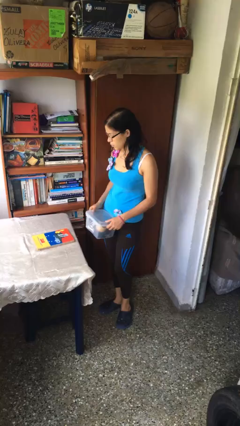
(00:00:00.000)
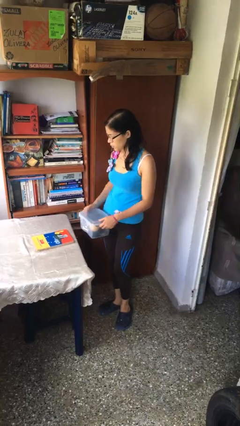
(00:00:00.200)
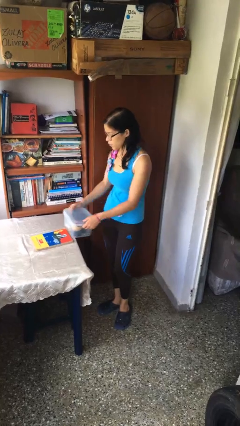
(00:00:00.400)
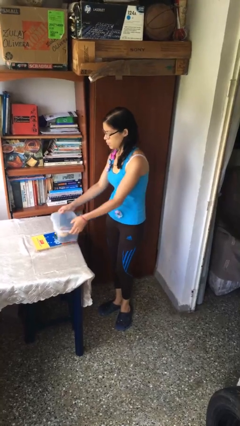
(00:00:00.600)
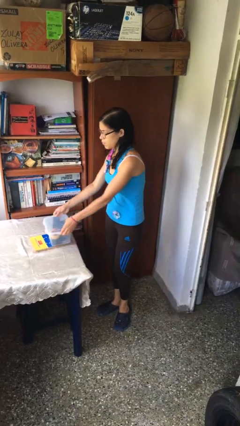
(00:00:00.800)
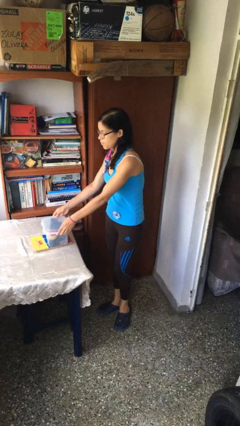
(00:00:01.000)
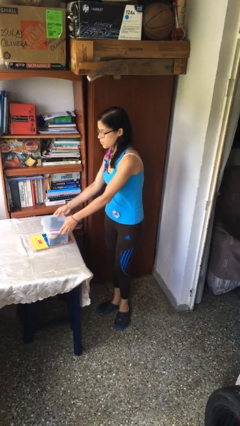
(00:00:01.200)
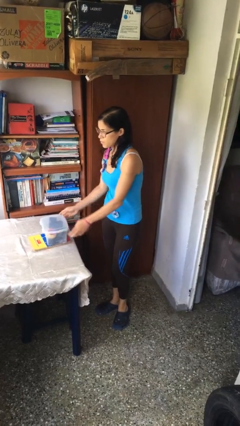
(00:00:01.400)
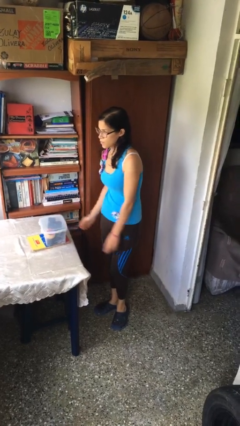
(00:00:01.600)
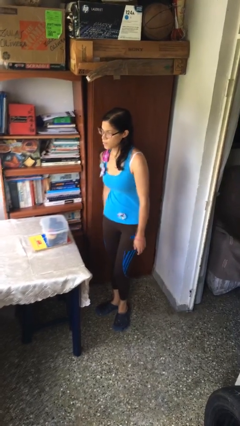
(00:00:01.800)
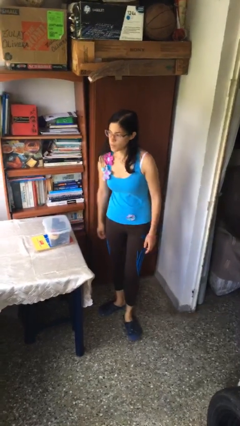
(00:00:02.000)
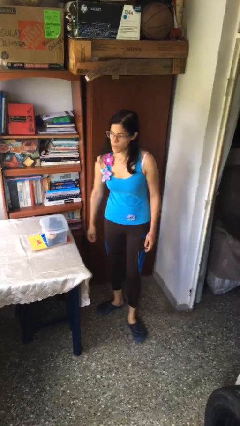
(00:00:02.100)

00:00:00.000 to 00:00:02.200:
person puts down object on table

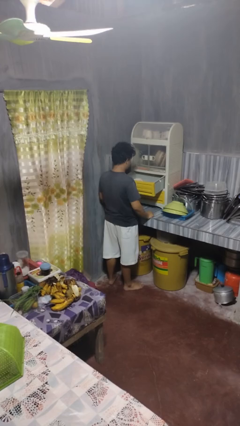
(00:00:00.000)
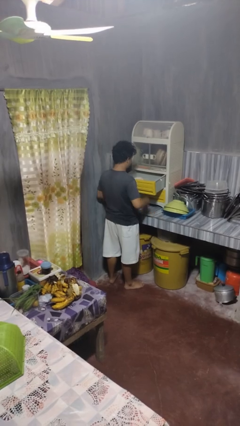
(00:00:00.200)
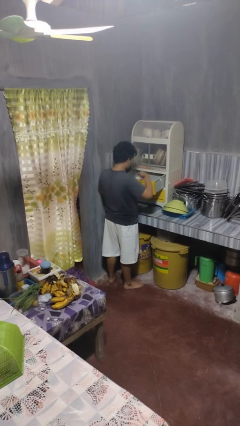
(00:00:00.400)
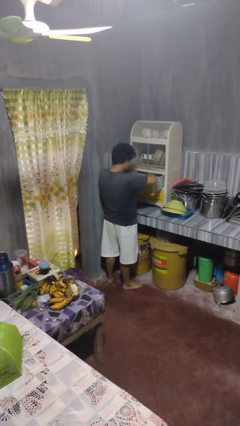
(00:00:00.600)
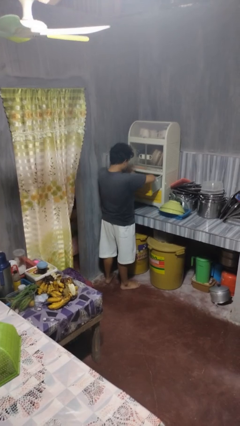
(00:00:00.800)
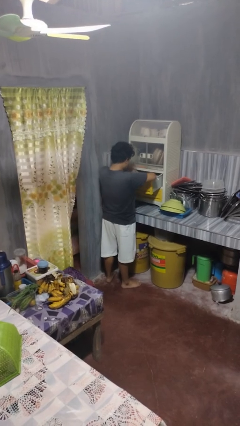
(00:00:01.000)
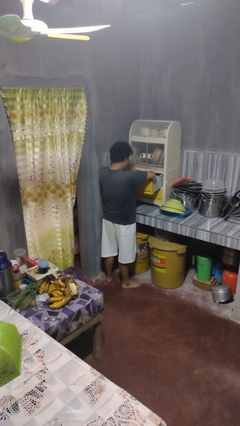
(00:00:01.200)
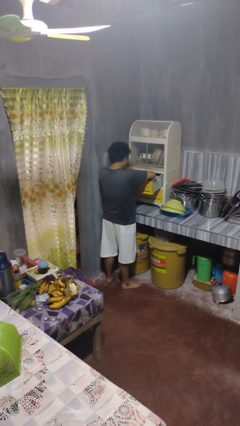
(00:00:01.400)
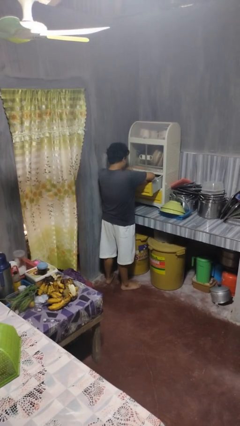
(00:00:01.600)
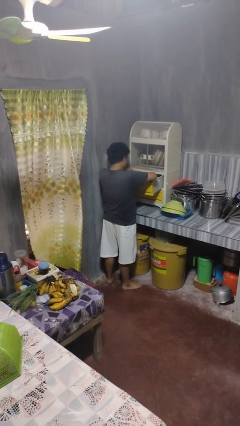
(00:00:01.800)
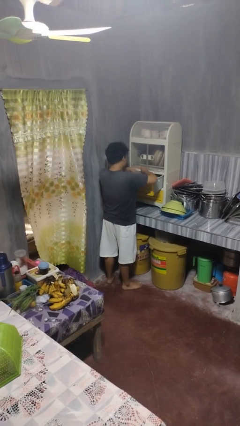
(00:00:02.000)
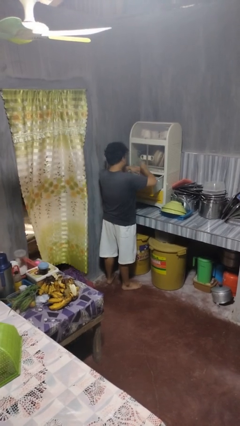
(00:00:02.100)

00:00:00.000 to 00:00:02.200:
person takes object from kitchen drawer

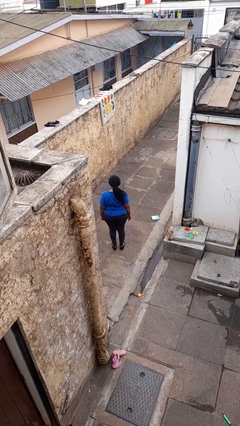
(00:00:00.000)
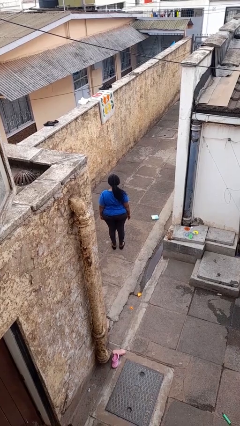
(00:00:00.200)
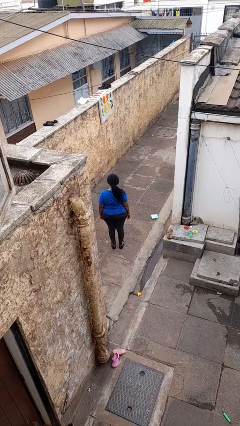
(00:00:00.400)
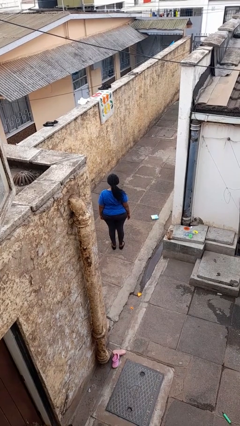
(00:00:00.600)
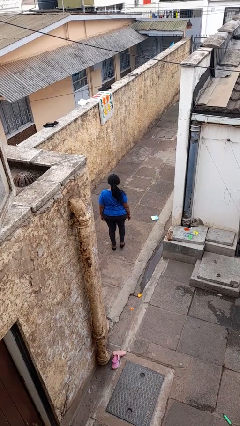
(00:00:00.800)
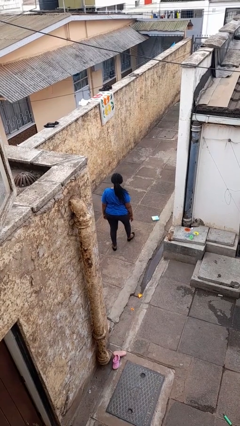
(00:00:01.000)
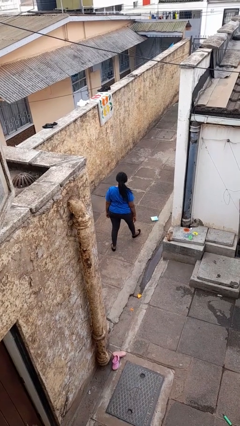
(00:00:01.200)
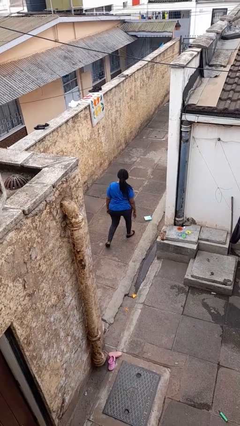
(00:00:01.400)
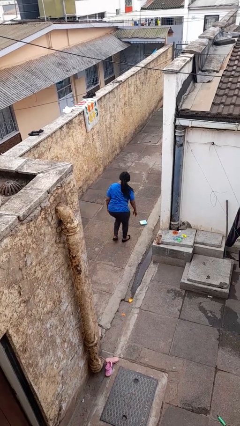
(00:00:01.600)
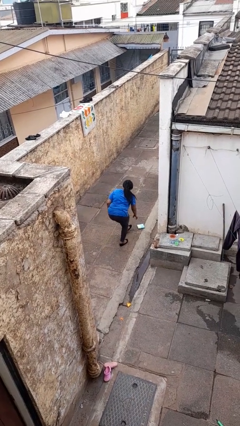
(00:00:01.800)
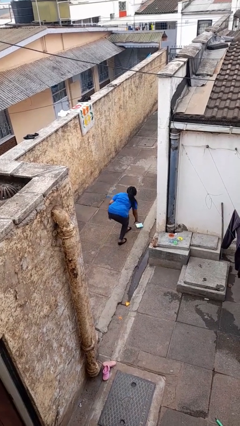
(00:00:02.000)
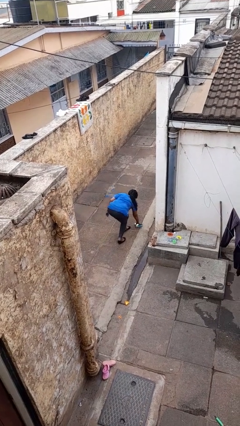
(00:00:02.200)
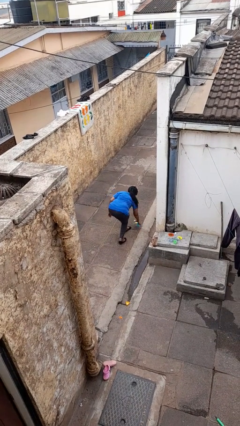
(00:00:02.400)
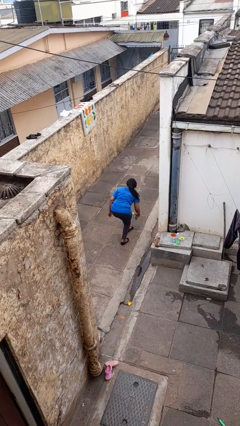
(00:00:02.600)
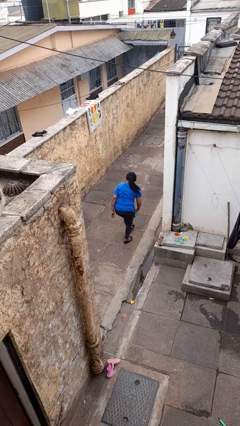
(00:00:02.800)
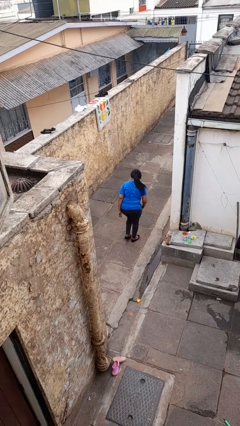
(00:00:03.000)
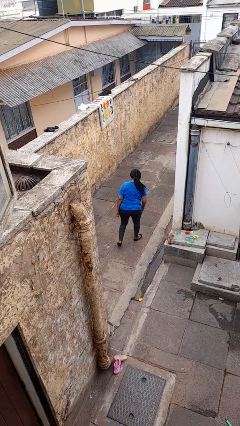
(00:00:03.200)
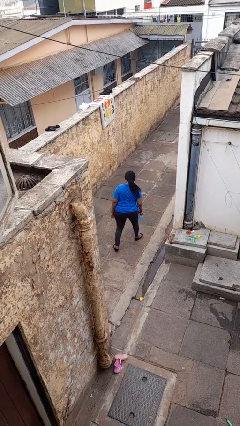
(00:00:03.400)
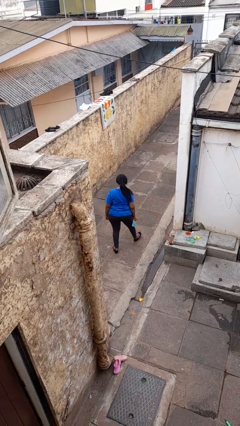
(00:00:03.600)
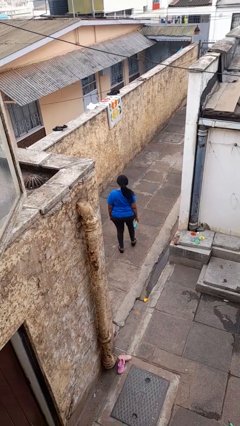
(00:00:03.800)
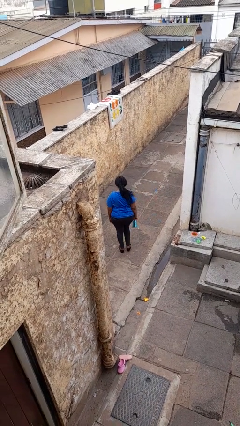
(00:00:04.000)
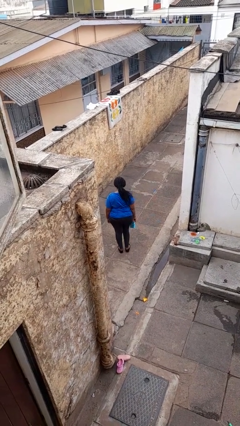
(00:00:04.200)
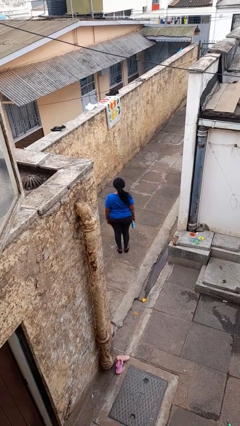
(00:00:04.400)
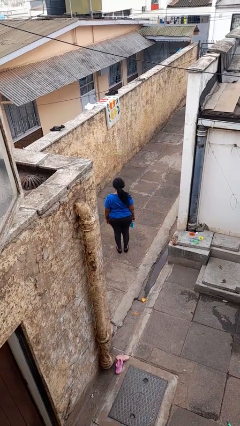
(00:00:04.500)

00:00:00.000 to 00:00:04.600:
person picks up object from floor

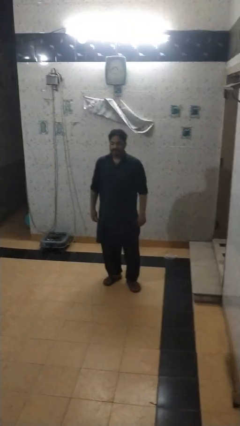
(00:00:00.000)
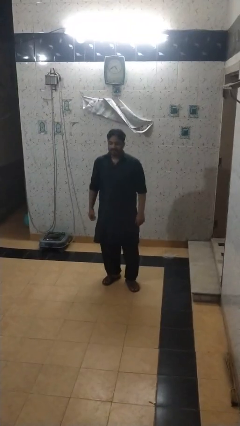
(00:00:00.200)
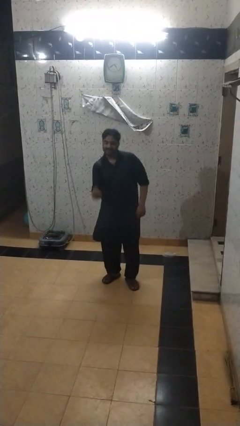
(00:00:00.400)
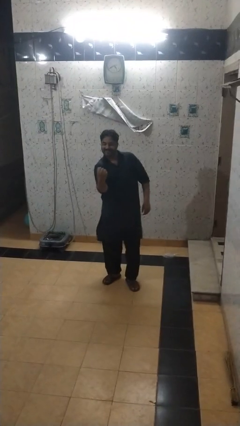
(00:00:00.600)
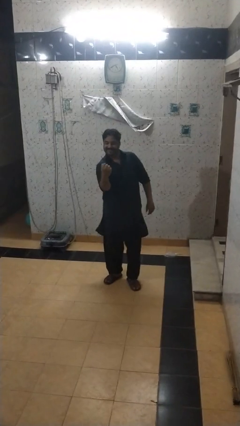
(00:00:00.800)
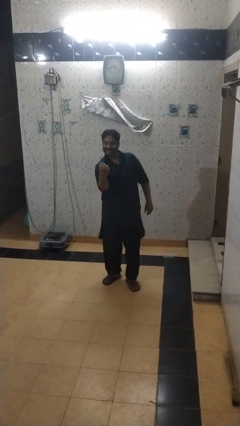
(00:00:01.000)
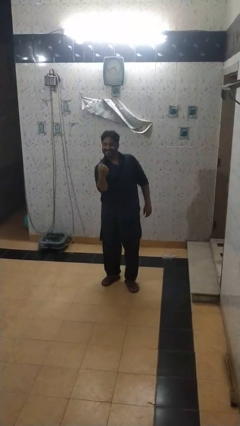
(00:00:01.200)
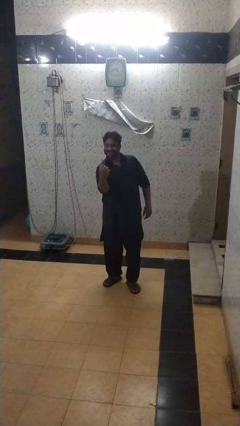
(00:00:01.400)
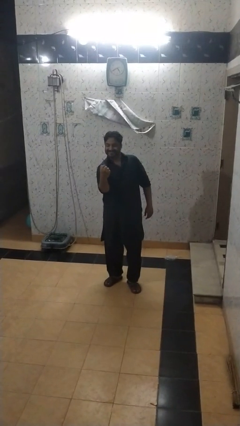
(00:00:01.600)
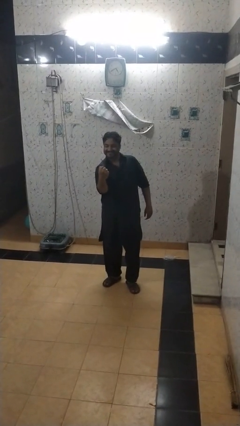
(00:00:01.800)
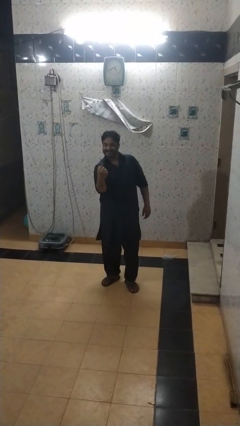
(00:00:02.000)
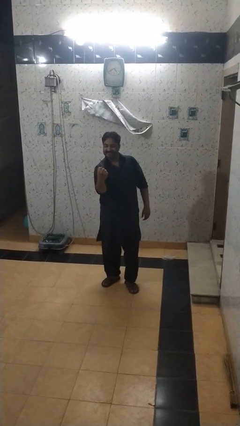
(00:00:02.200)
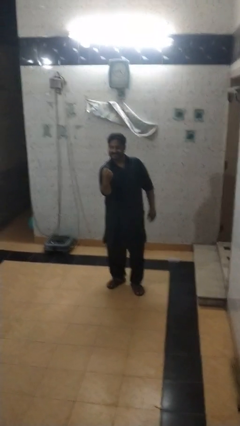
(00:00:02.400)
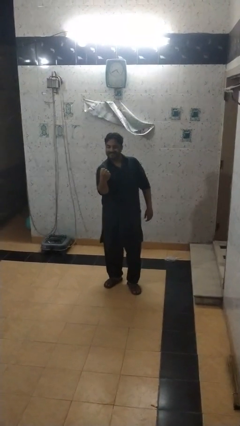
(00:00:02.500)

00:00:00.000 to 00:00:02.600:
person punches

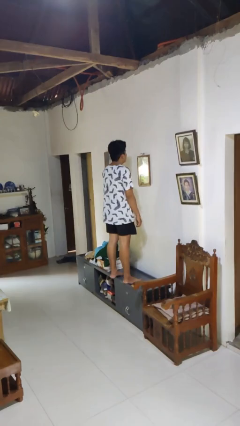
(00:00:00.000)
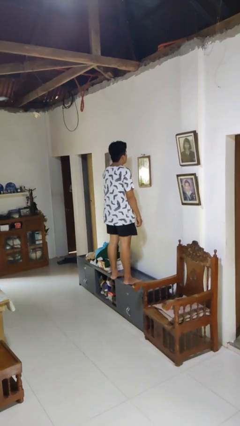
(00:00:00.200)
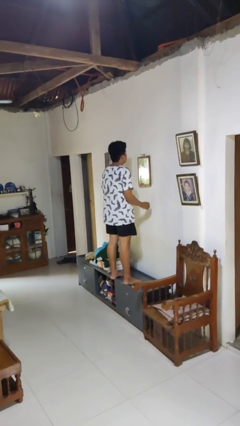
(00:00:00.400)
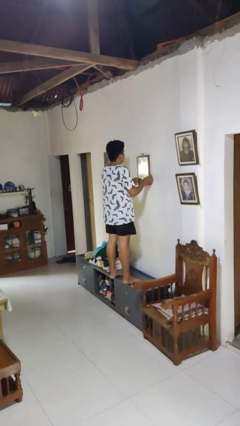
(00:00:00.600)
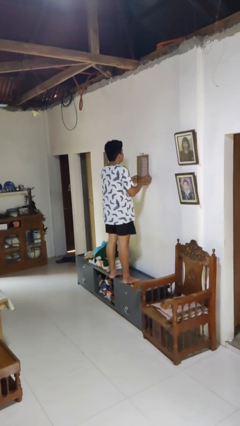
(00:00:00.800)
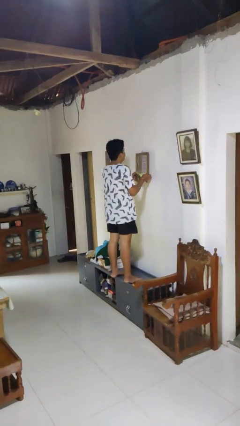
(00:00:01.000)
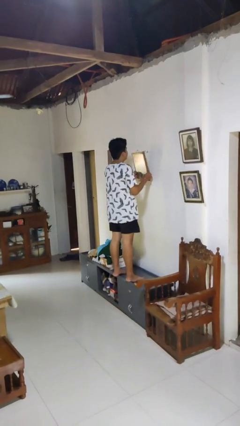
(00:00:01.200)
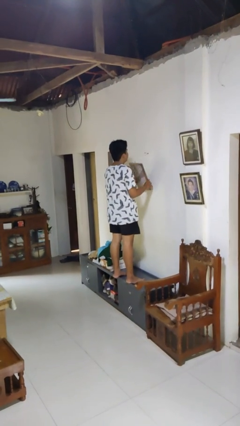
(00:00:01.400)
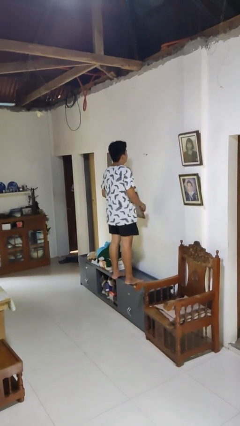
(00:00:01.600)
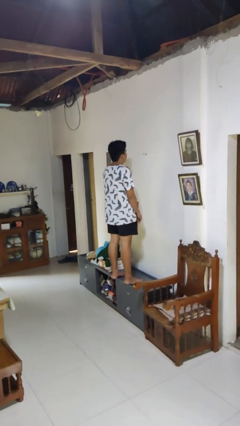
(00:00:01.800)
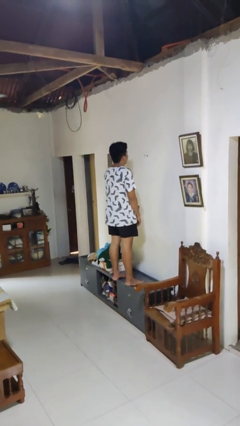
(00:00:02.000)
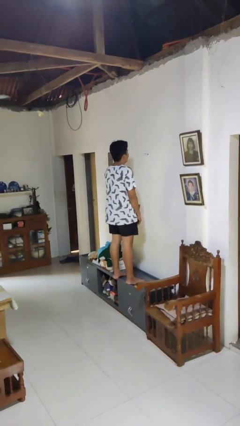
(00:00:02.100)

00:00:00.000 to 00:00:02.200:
person takes down picture frame

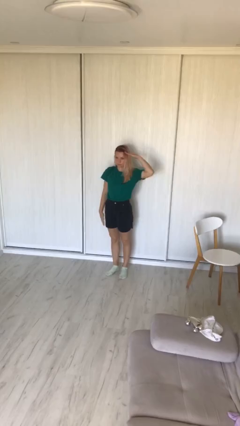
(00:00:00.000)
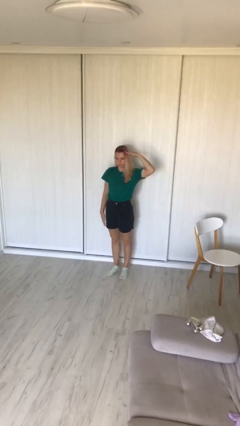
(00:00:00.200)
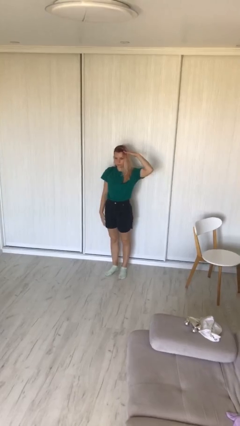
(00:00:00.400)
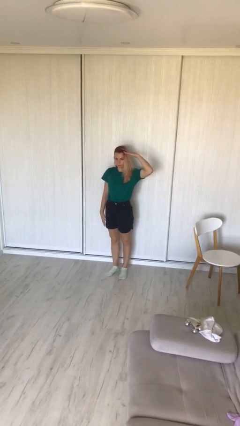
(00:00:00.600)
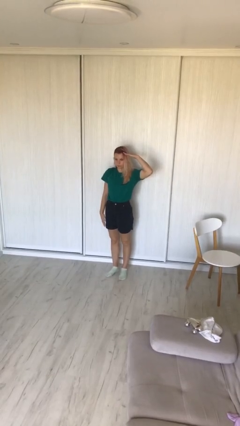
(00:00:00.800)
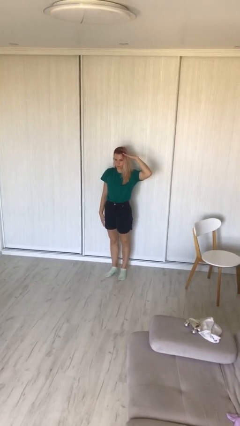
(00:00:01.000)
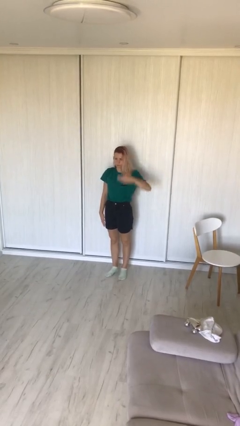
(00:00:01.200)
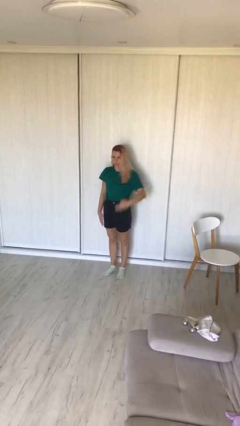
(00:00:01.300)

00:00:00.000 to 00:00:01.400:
person salutes

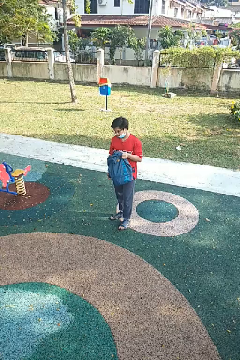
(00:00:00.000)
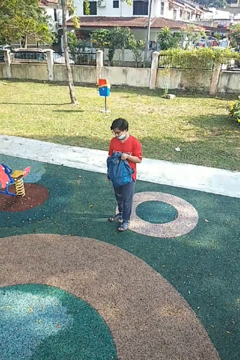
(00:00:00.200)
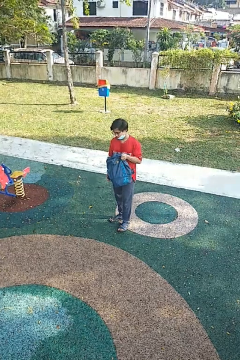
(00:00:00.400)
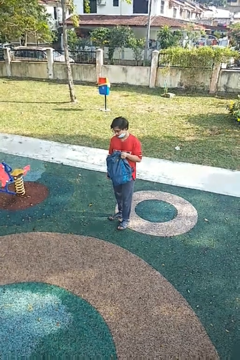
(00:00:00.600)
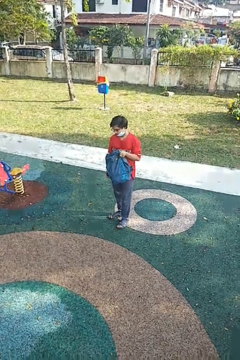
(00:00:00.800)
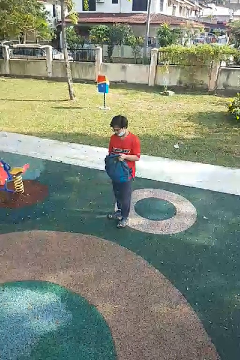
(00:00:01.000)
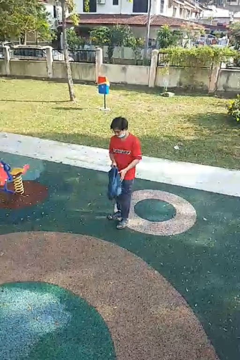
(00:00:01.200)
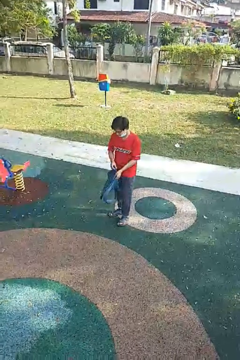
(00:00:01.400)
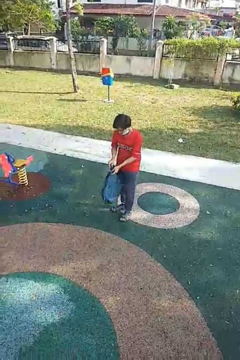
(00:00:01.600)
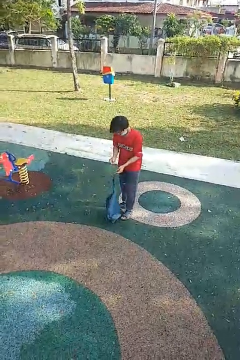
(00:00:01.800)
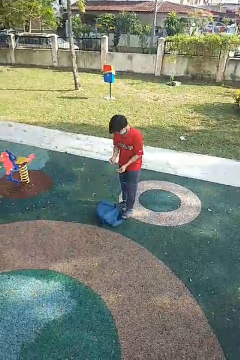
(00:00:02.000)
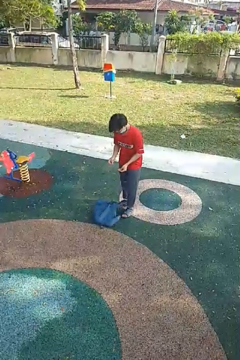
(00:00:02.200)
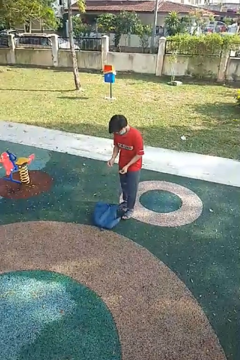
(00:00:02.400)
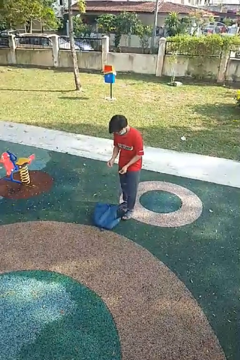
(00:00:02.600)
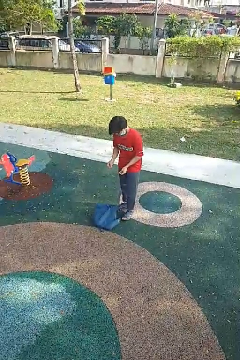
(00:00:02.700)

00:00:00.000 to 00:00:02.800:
person drops object
